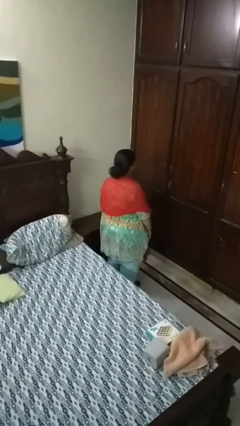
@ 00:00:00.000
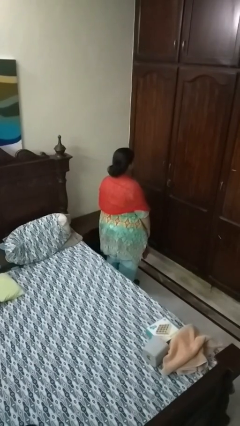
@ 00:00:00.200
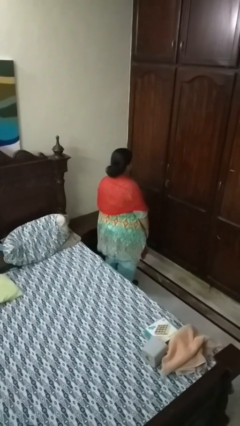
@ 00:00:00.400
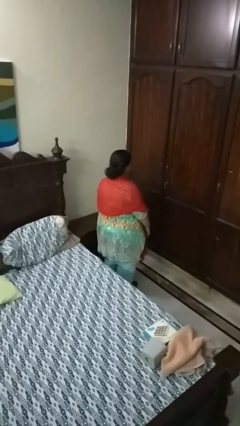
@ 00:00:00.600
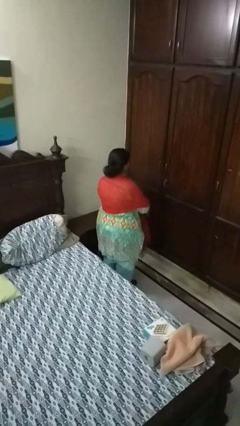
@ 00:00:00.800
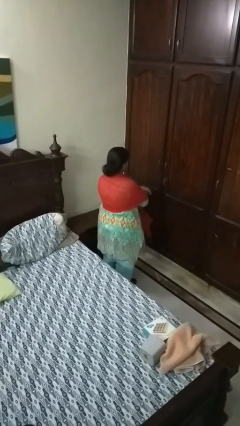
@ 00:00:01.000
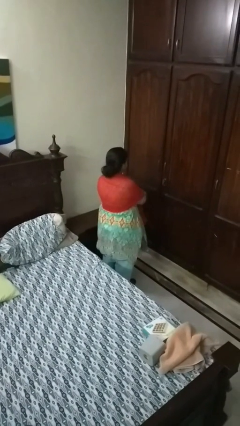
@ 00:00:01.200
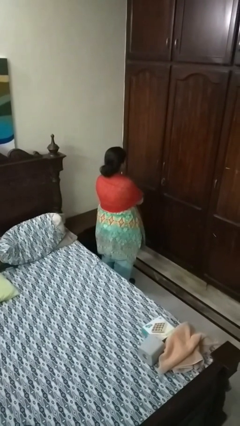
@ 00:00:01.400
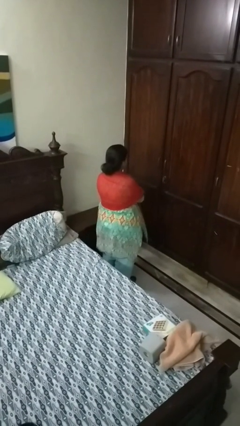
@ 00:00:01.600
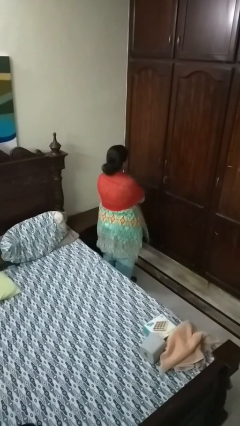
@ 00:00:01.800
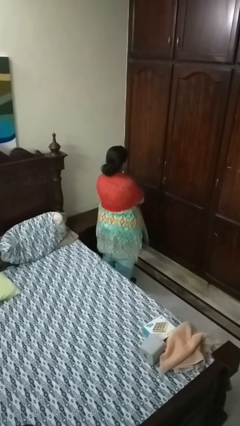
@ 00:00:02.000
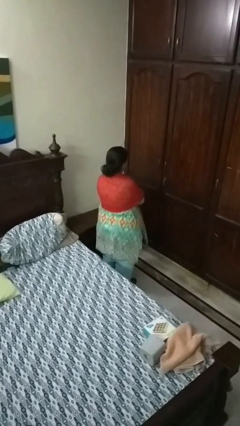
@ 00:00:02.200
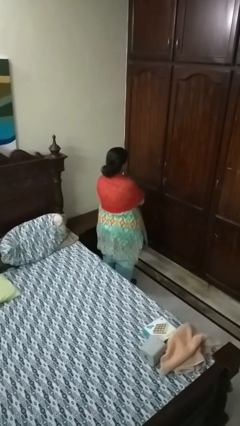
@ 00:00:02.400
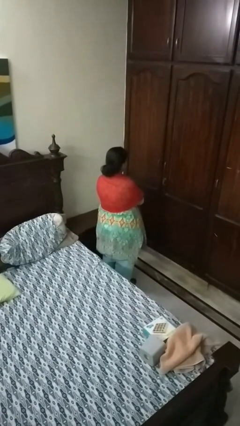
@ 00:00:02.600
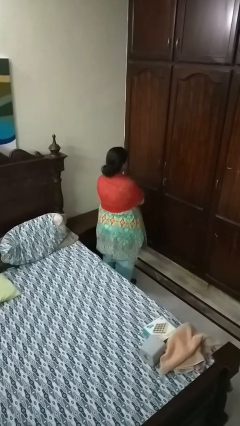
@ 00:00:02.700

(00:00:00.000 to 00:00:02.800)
person crosses arms

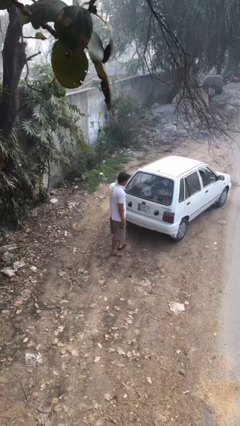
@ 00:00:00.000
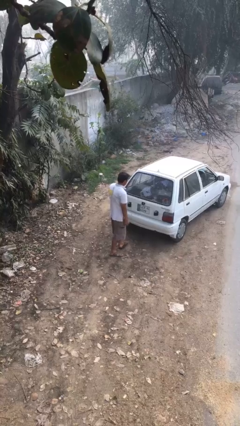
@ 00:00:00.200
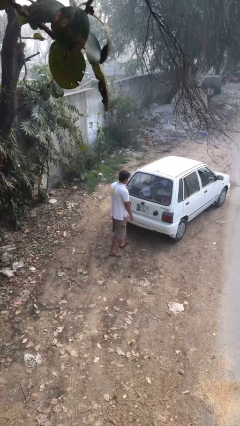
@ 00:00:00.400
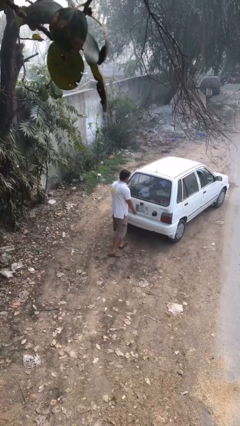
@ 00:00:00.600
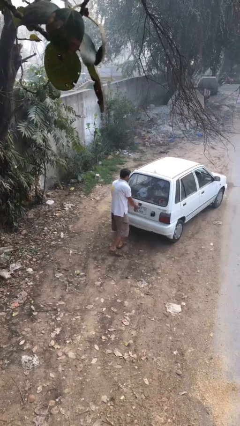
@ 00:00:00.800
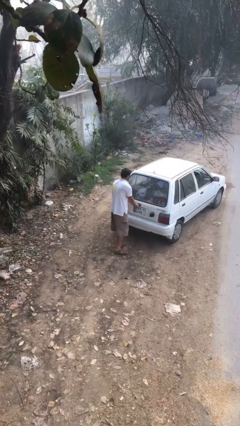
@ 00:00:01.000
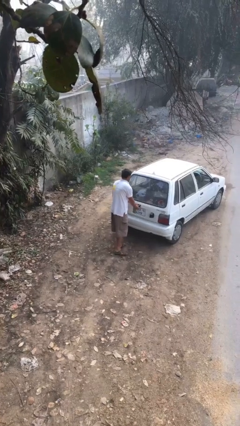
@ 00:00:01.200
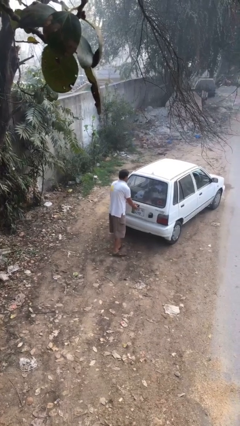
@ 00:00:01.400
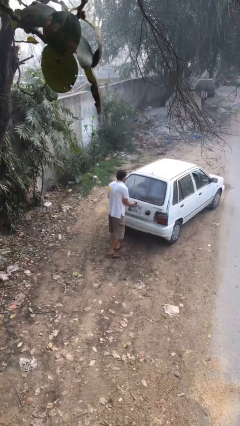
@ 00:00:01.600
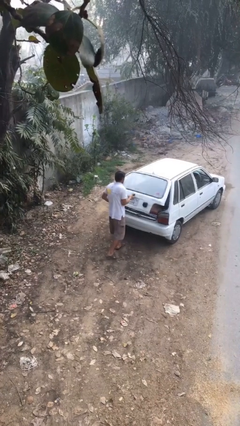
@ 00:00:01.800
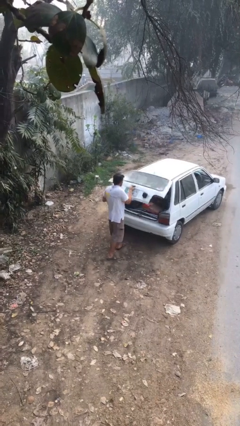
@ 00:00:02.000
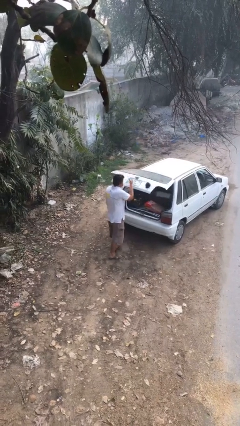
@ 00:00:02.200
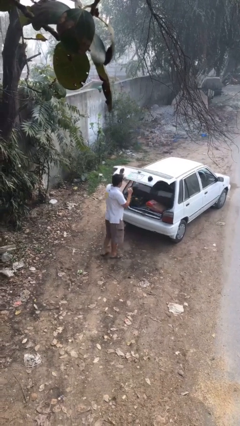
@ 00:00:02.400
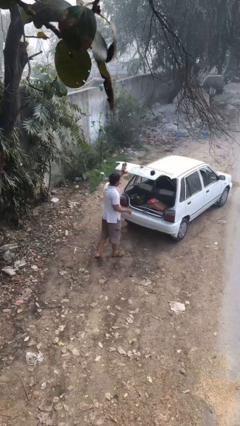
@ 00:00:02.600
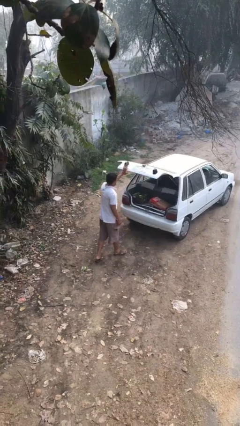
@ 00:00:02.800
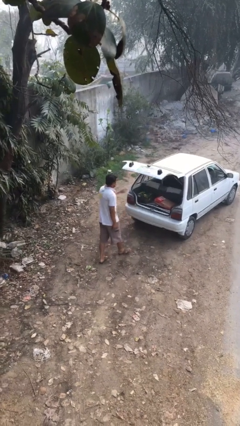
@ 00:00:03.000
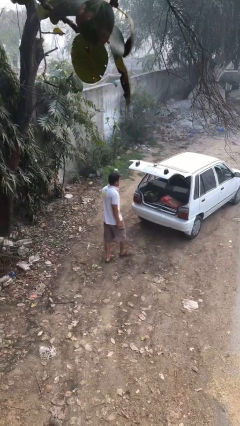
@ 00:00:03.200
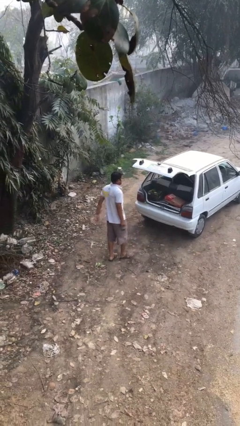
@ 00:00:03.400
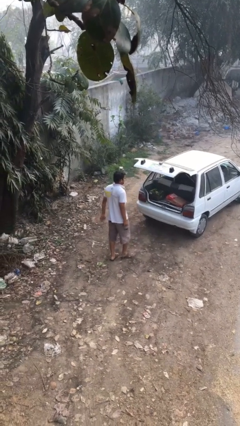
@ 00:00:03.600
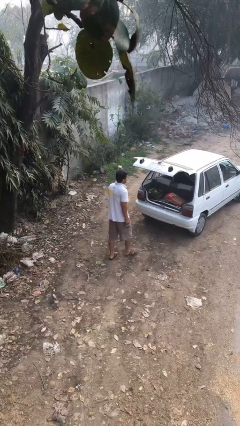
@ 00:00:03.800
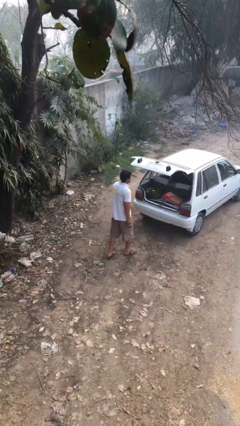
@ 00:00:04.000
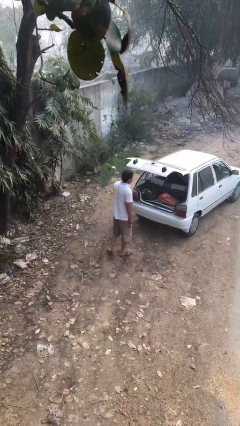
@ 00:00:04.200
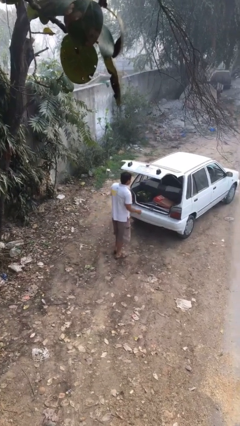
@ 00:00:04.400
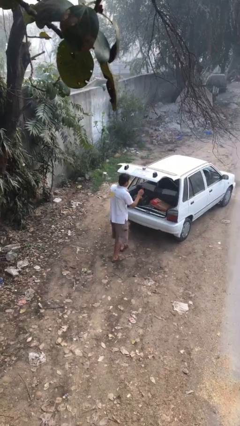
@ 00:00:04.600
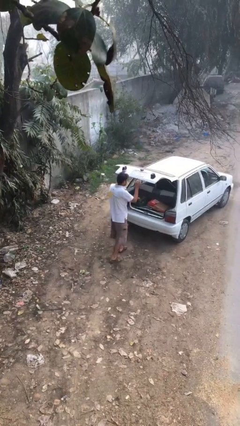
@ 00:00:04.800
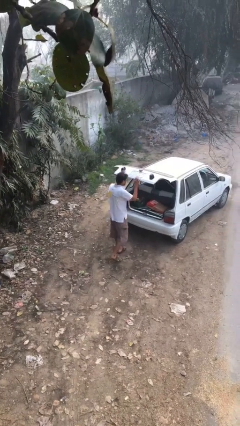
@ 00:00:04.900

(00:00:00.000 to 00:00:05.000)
person opens car trunk

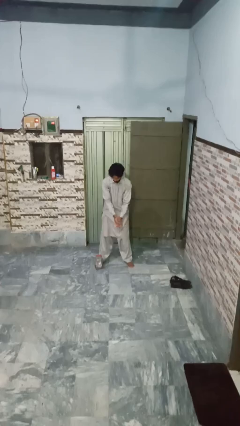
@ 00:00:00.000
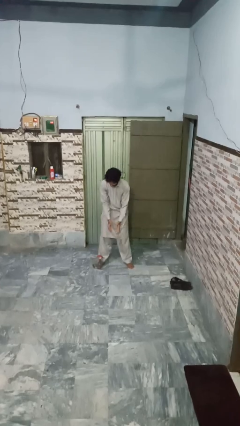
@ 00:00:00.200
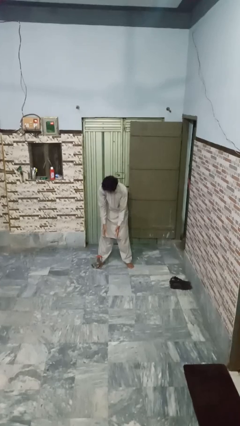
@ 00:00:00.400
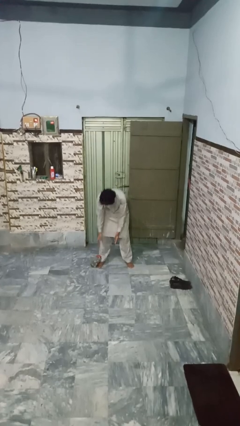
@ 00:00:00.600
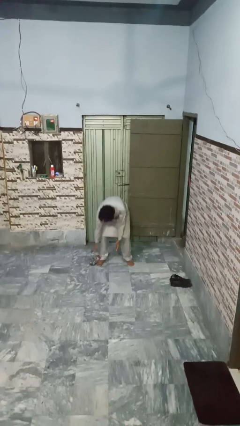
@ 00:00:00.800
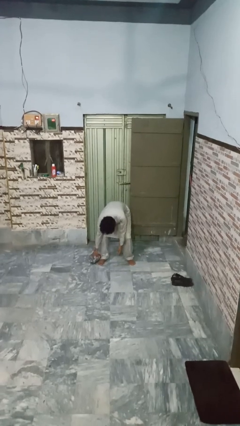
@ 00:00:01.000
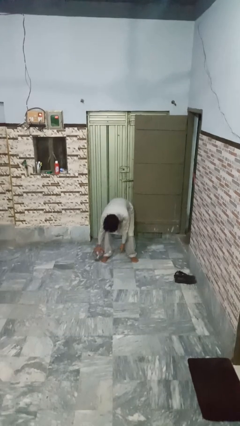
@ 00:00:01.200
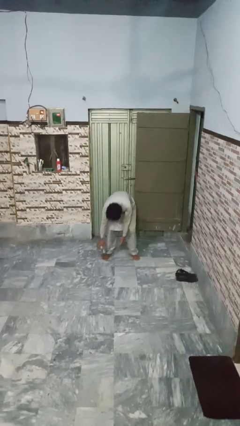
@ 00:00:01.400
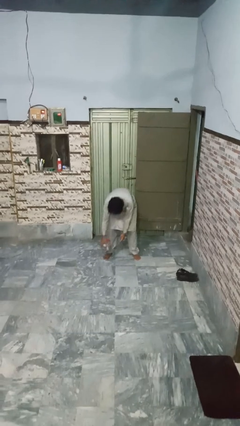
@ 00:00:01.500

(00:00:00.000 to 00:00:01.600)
person catches dropped object

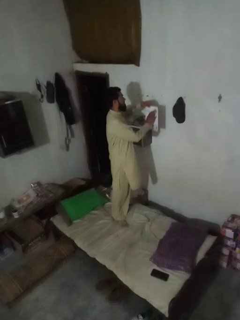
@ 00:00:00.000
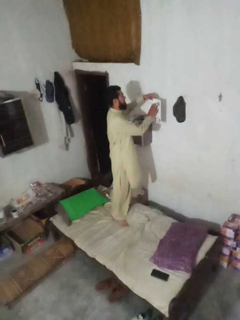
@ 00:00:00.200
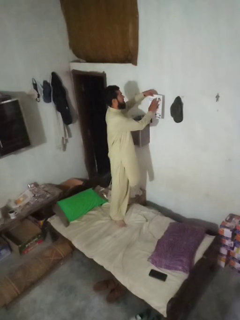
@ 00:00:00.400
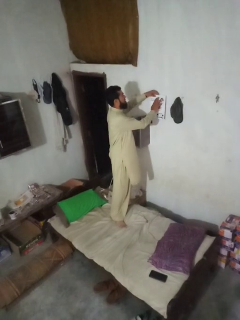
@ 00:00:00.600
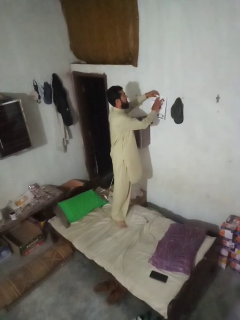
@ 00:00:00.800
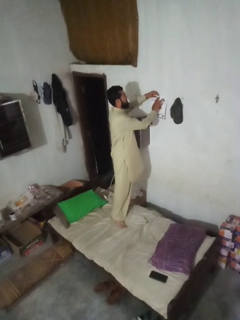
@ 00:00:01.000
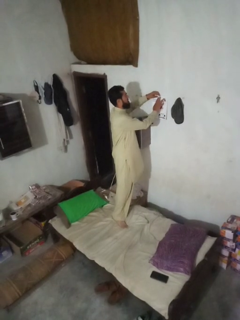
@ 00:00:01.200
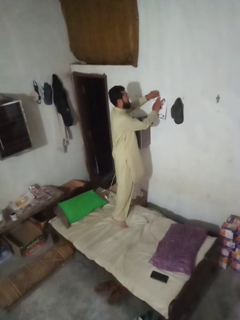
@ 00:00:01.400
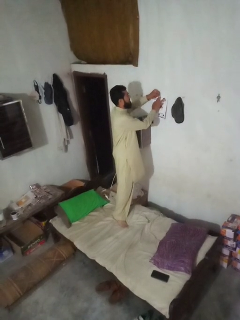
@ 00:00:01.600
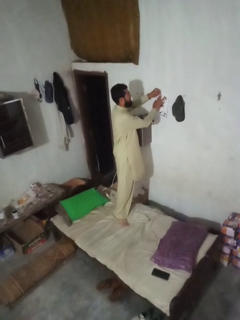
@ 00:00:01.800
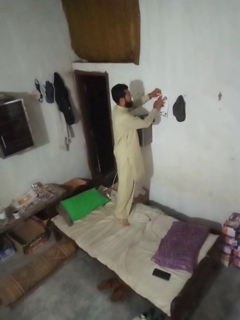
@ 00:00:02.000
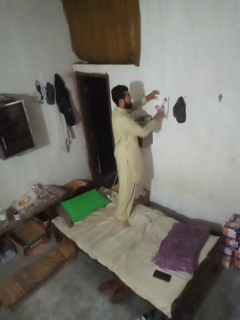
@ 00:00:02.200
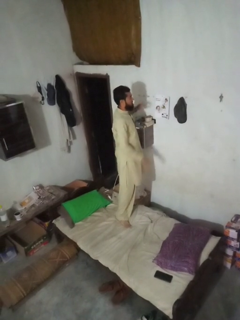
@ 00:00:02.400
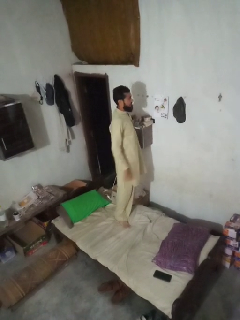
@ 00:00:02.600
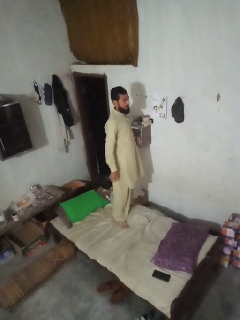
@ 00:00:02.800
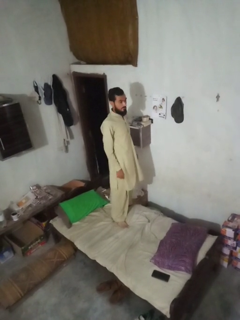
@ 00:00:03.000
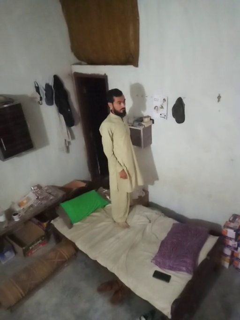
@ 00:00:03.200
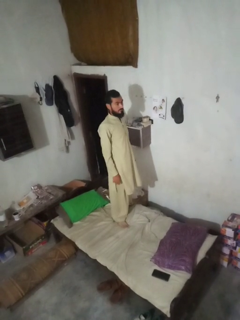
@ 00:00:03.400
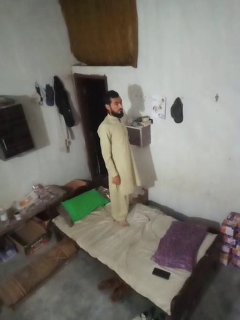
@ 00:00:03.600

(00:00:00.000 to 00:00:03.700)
person puts up picture frame

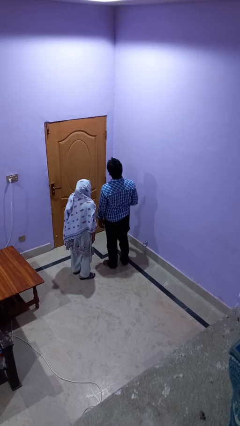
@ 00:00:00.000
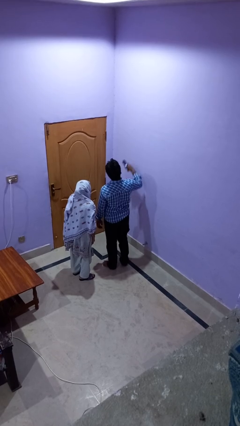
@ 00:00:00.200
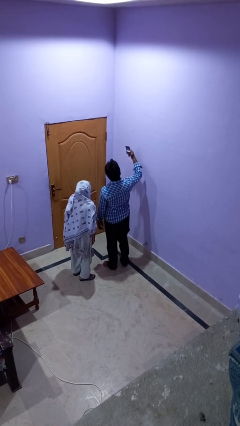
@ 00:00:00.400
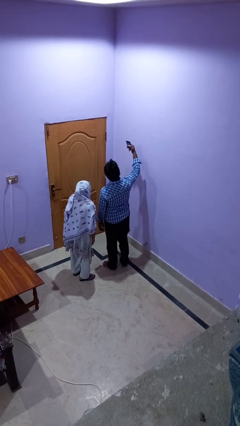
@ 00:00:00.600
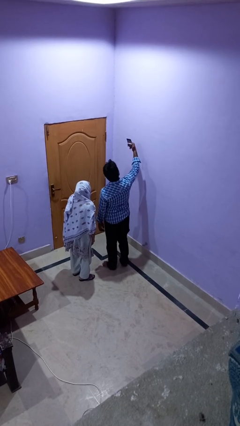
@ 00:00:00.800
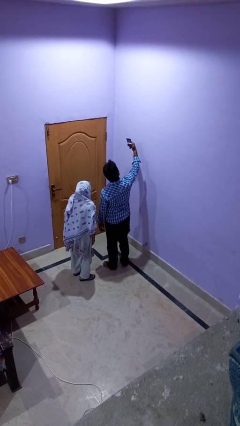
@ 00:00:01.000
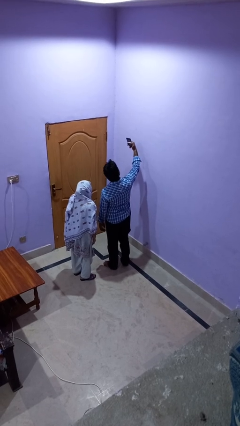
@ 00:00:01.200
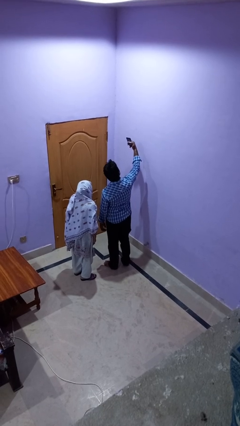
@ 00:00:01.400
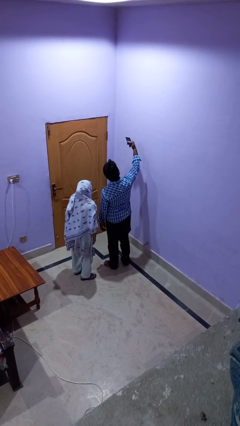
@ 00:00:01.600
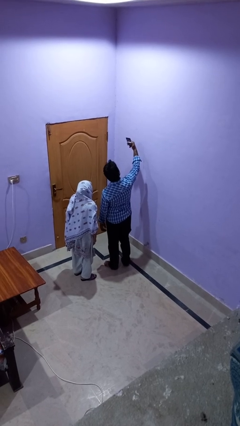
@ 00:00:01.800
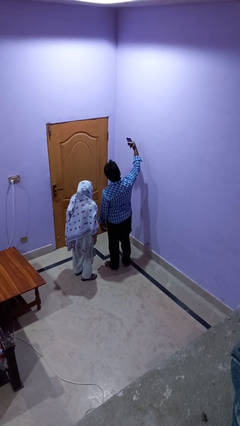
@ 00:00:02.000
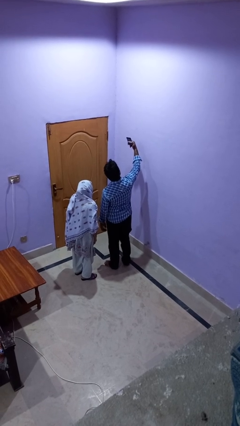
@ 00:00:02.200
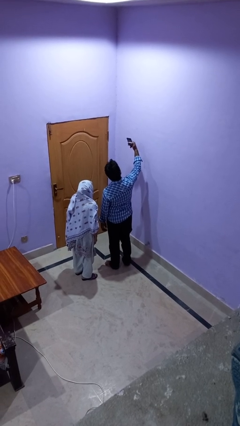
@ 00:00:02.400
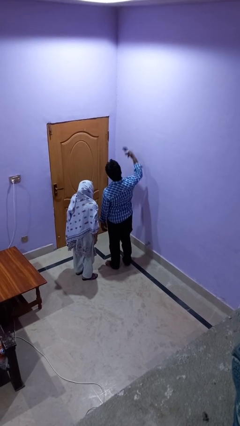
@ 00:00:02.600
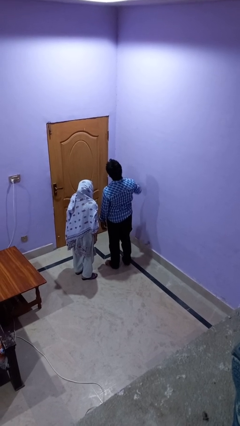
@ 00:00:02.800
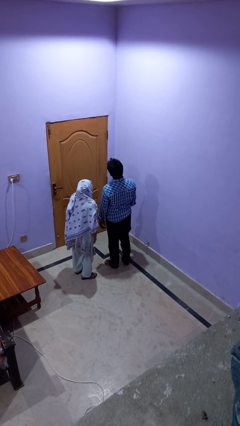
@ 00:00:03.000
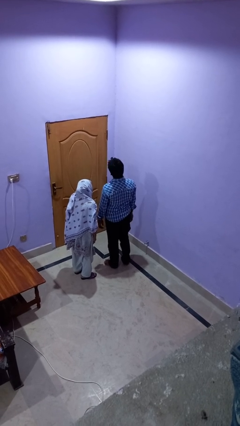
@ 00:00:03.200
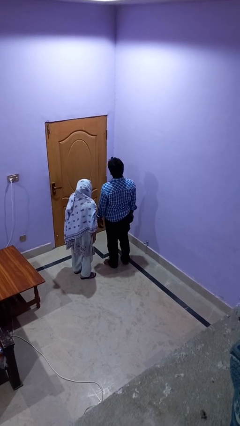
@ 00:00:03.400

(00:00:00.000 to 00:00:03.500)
person takes selfie with person

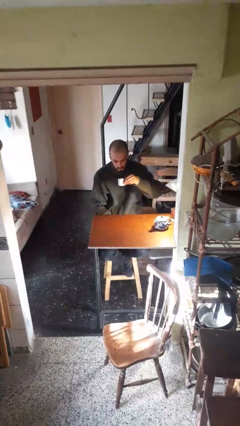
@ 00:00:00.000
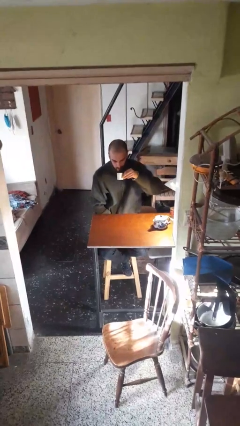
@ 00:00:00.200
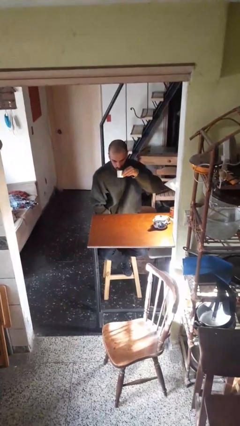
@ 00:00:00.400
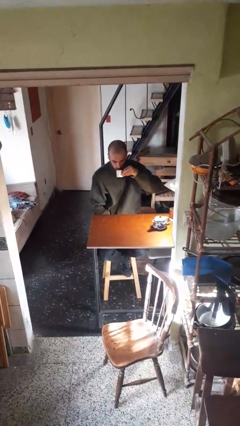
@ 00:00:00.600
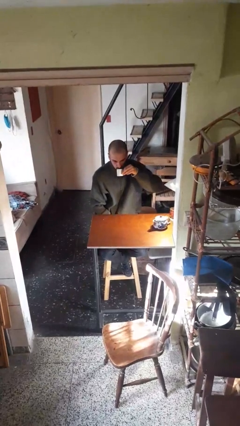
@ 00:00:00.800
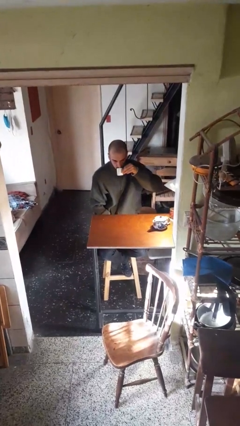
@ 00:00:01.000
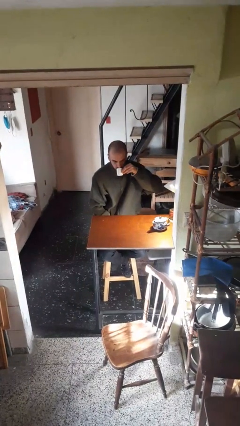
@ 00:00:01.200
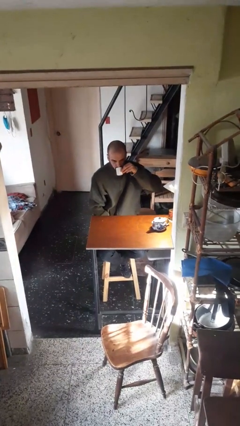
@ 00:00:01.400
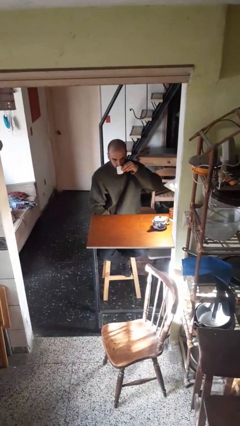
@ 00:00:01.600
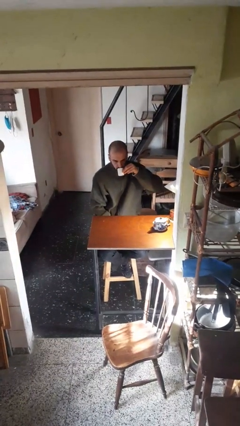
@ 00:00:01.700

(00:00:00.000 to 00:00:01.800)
person drinks from mug
